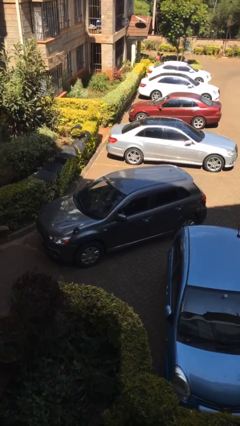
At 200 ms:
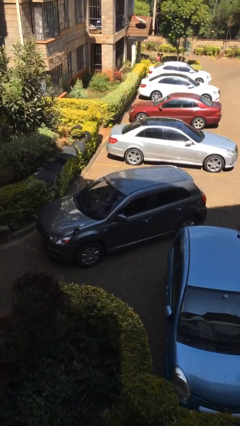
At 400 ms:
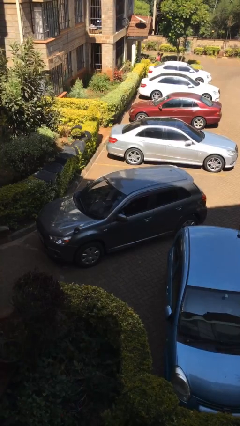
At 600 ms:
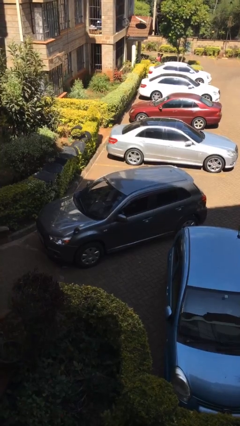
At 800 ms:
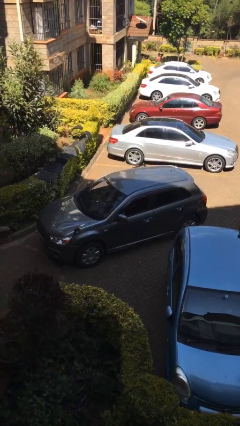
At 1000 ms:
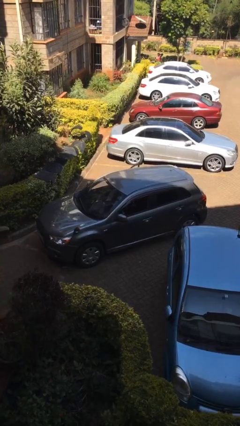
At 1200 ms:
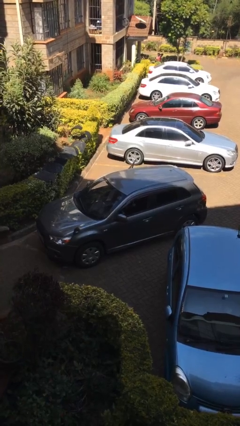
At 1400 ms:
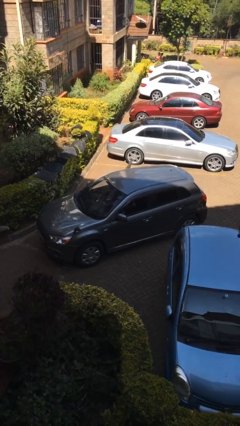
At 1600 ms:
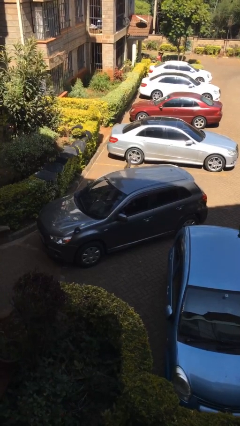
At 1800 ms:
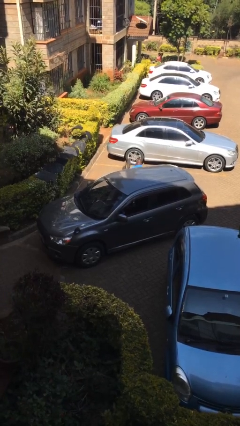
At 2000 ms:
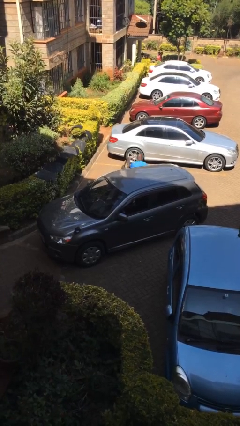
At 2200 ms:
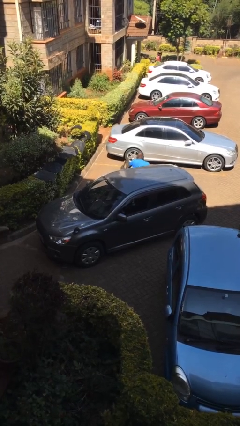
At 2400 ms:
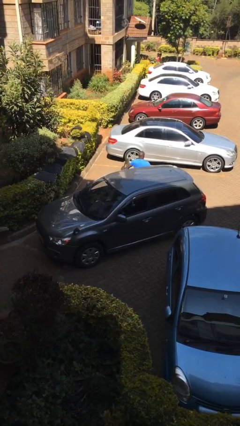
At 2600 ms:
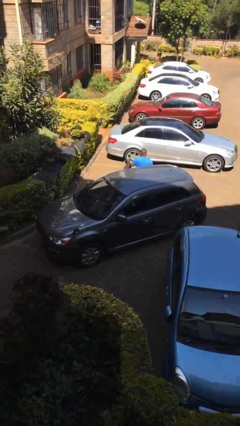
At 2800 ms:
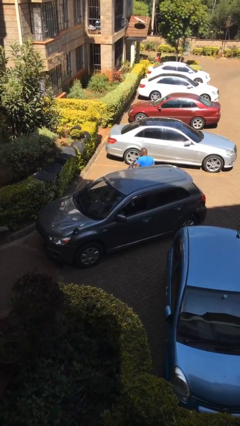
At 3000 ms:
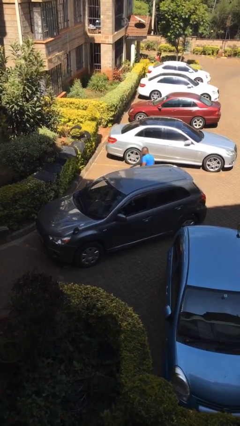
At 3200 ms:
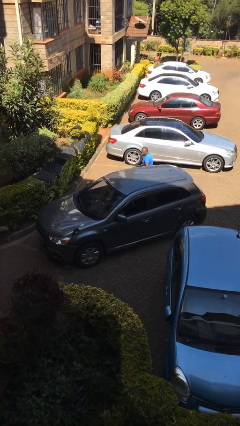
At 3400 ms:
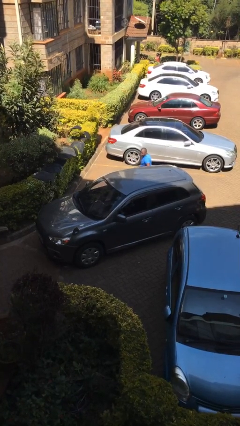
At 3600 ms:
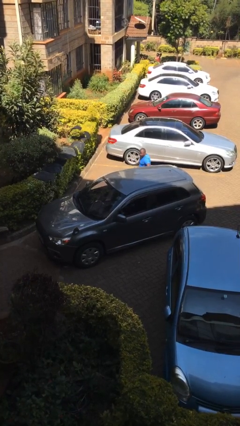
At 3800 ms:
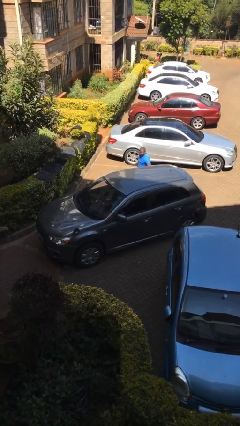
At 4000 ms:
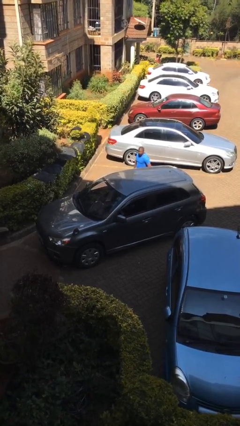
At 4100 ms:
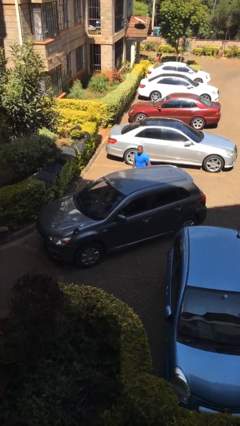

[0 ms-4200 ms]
car drops off person

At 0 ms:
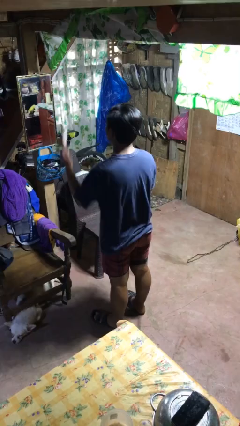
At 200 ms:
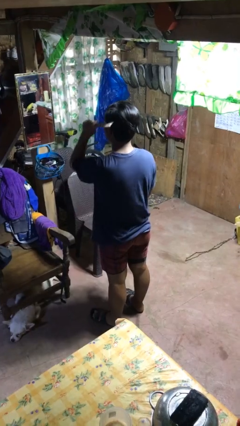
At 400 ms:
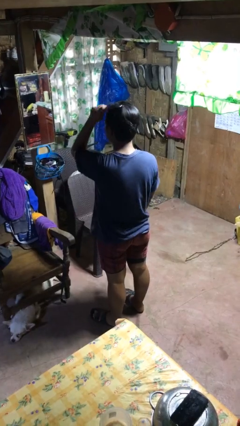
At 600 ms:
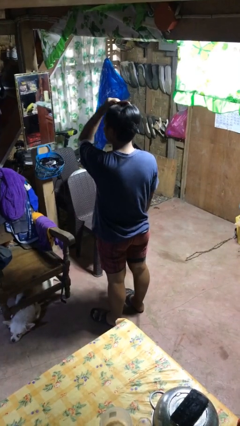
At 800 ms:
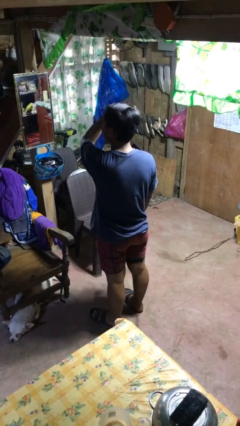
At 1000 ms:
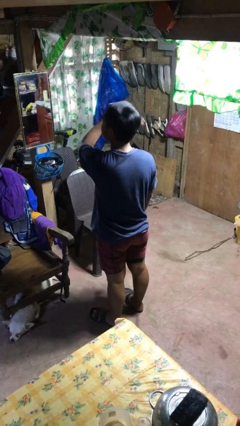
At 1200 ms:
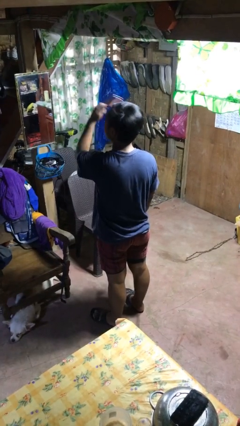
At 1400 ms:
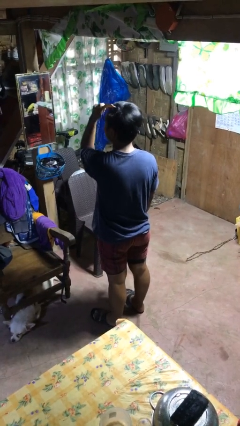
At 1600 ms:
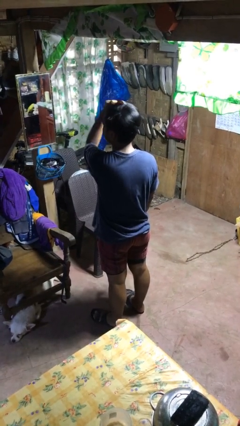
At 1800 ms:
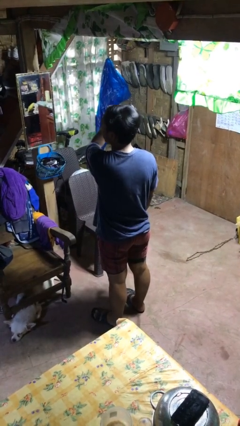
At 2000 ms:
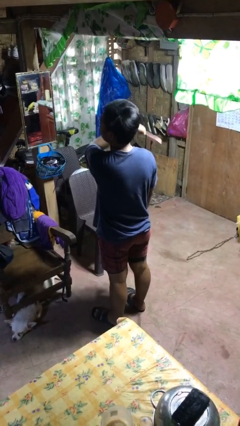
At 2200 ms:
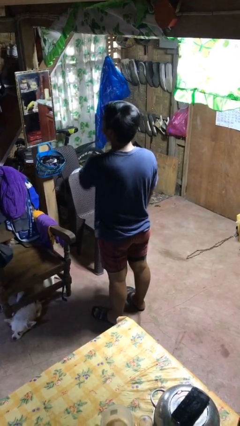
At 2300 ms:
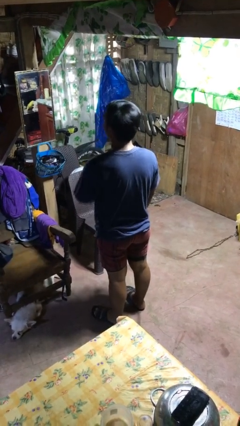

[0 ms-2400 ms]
person brushes hair

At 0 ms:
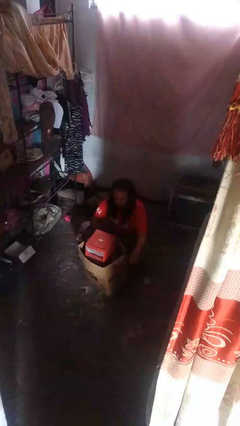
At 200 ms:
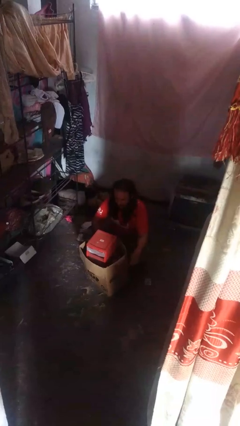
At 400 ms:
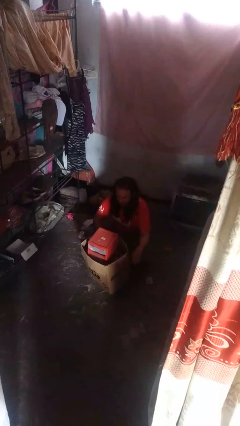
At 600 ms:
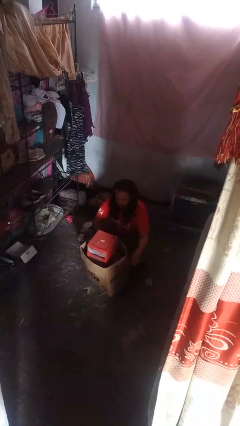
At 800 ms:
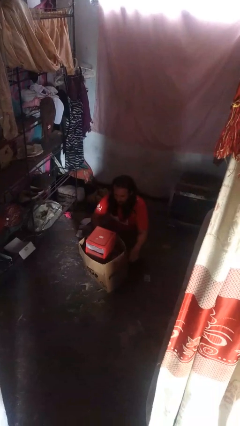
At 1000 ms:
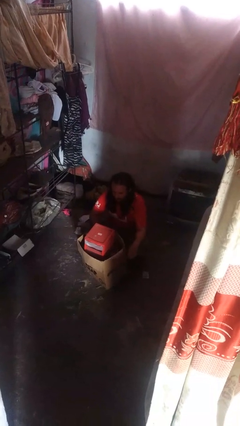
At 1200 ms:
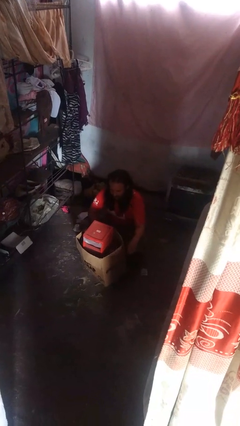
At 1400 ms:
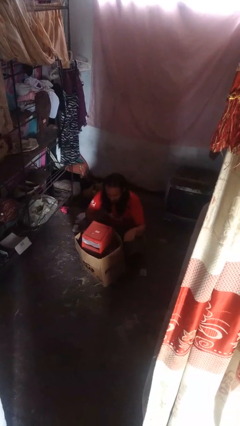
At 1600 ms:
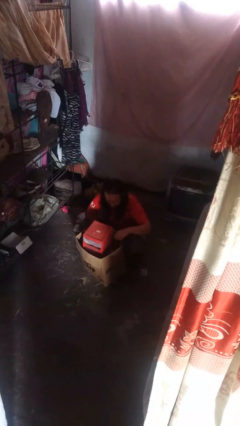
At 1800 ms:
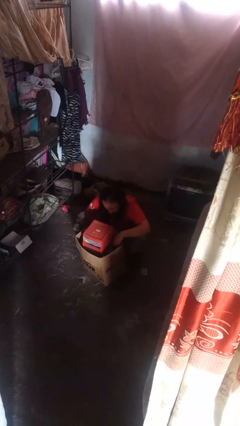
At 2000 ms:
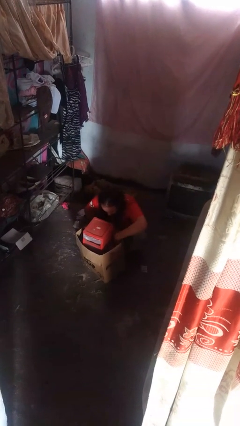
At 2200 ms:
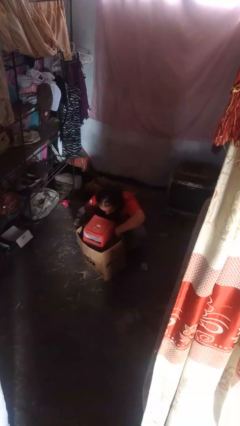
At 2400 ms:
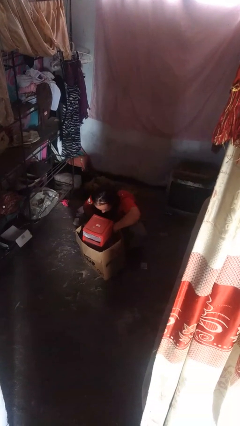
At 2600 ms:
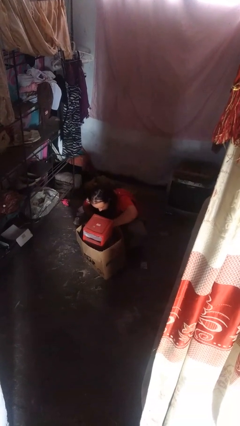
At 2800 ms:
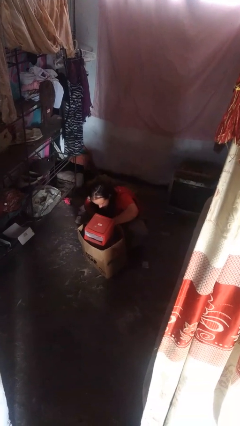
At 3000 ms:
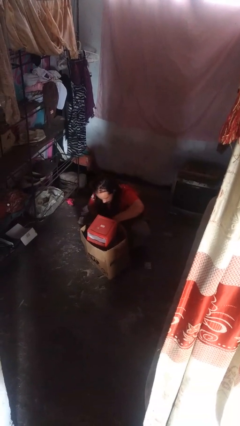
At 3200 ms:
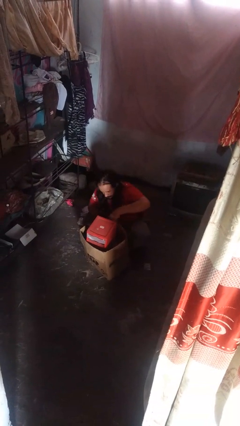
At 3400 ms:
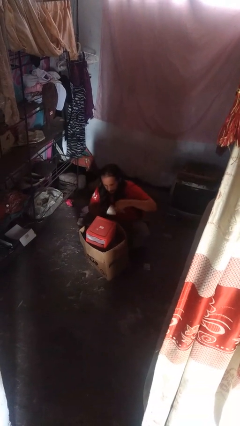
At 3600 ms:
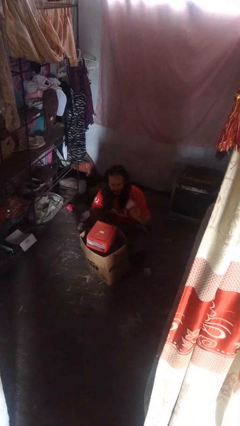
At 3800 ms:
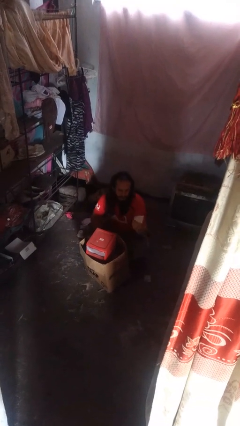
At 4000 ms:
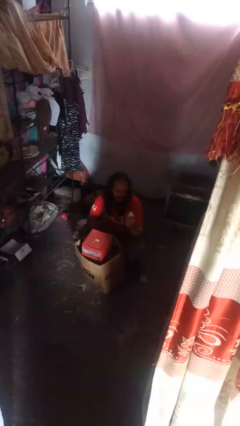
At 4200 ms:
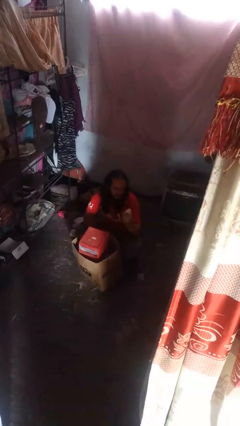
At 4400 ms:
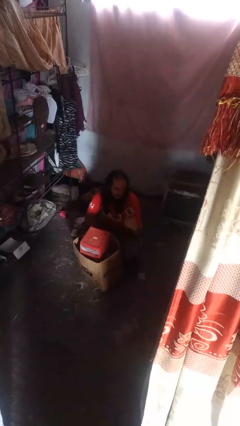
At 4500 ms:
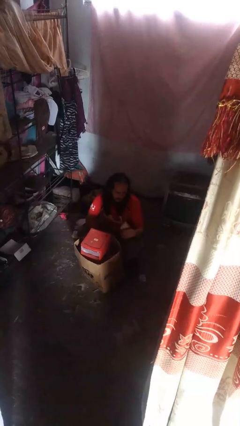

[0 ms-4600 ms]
person takes object from box

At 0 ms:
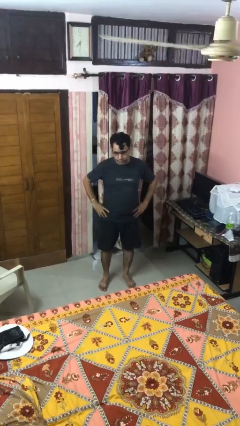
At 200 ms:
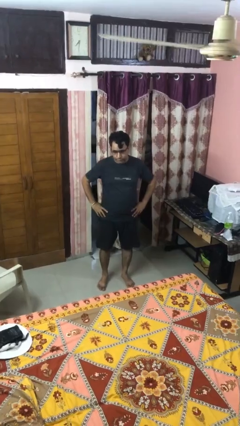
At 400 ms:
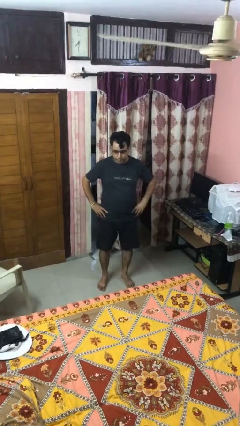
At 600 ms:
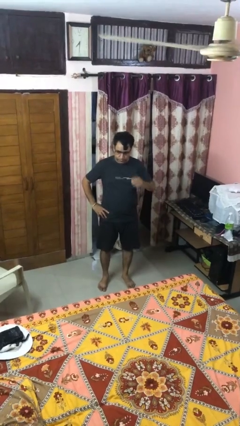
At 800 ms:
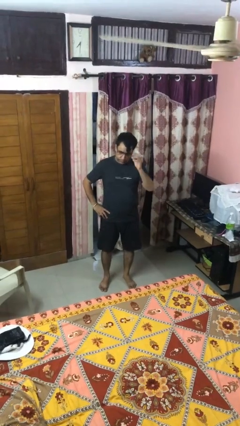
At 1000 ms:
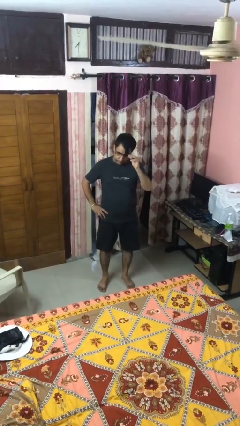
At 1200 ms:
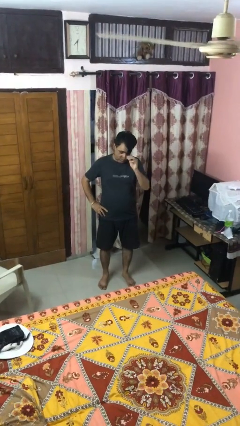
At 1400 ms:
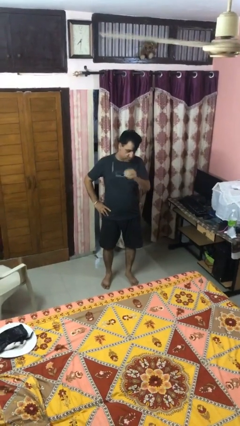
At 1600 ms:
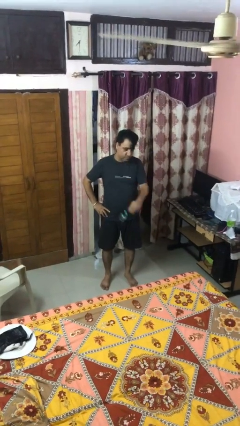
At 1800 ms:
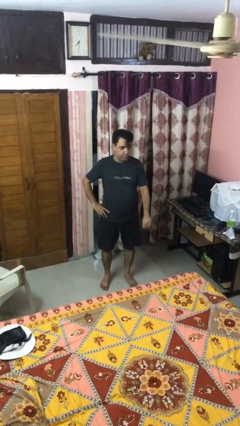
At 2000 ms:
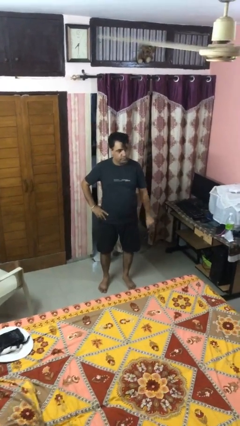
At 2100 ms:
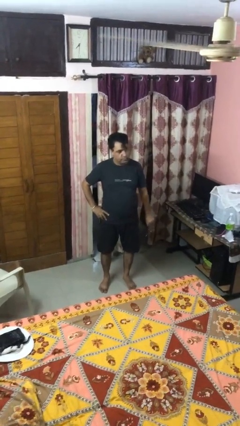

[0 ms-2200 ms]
person takes off glasses

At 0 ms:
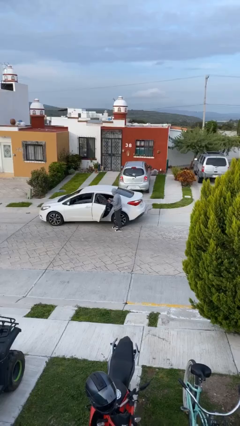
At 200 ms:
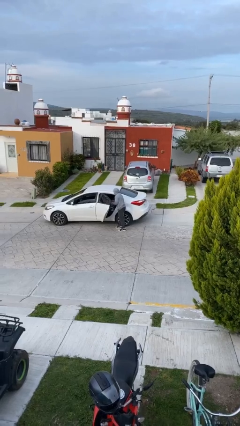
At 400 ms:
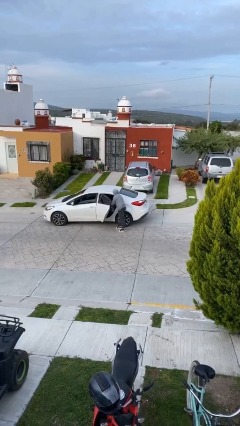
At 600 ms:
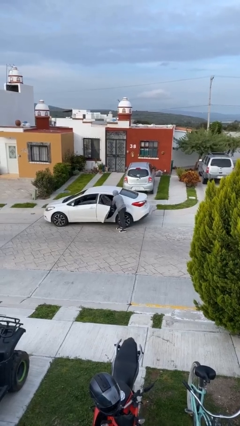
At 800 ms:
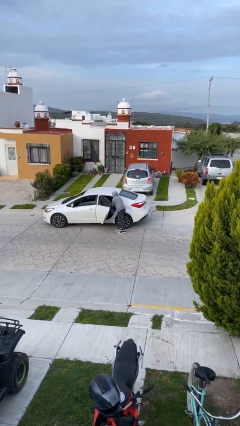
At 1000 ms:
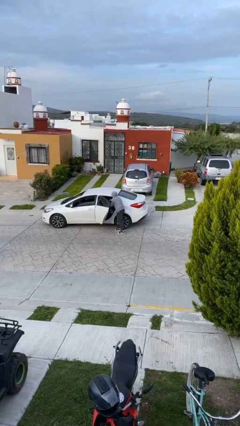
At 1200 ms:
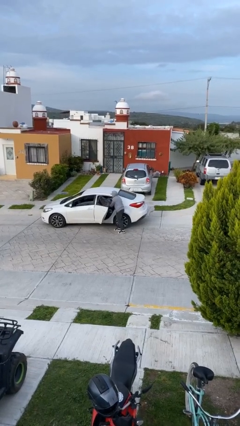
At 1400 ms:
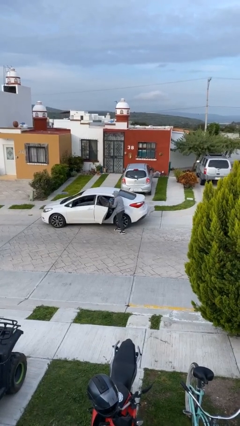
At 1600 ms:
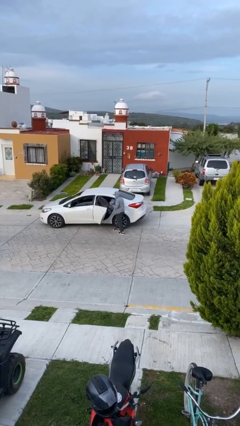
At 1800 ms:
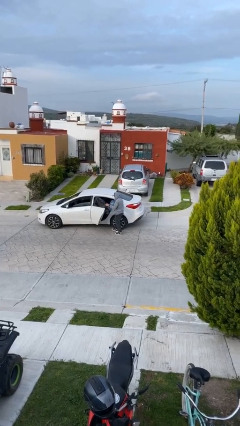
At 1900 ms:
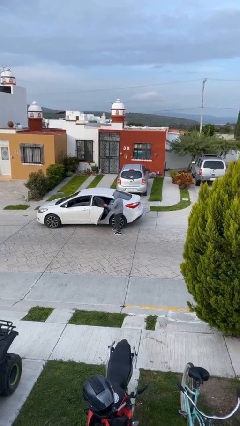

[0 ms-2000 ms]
person unloads car

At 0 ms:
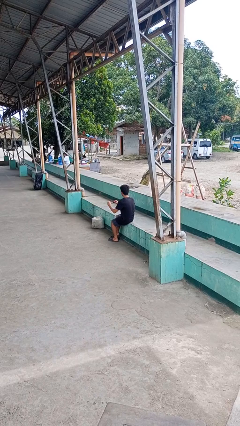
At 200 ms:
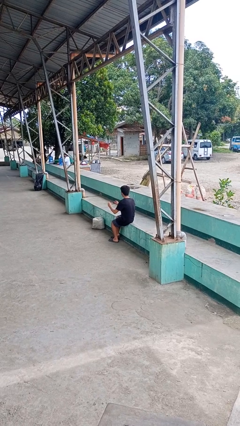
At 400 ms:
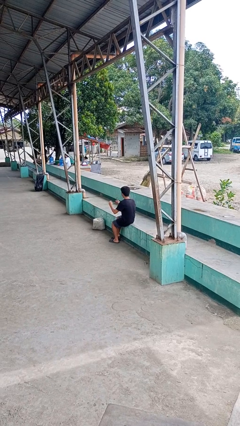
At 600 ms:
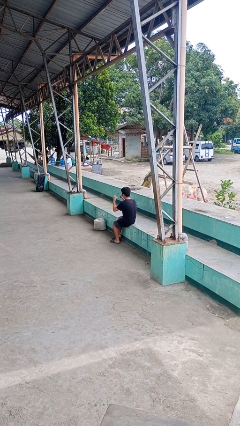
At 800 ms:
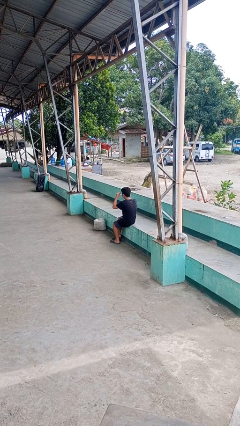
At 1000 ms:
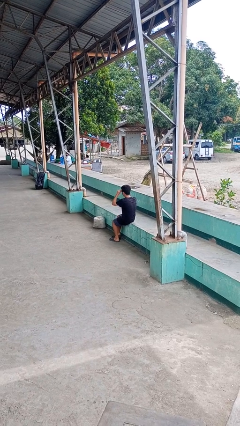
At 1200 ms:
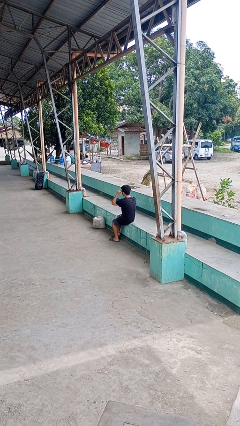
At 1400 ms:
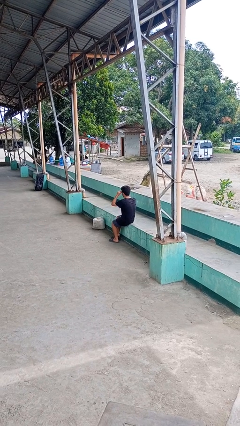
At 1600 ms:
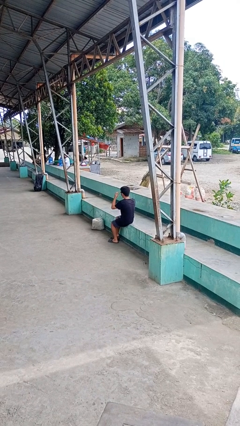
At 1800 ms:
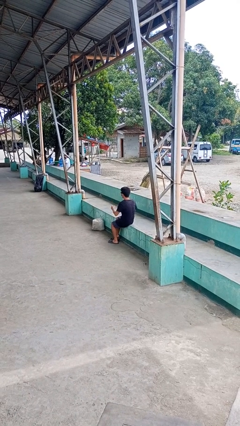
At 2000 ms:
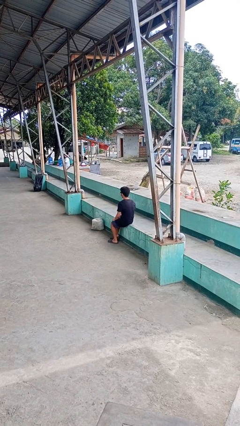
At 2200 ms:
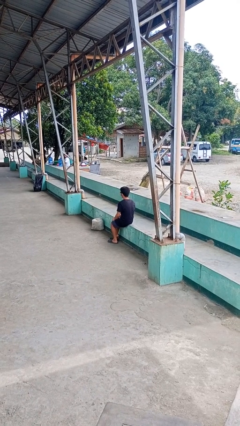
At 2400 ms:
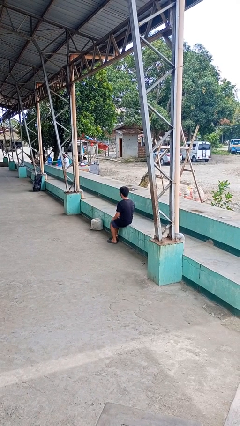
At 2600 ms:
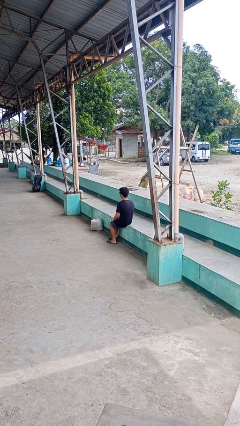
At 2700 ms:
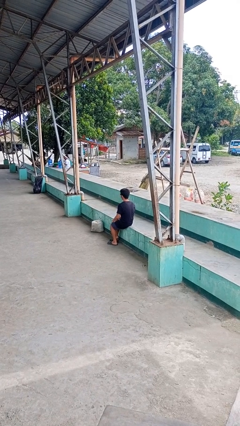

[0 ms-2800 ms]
person puts on sunglasses
